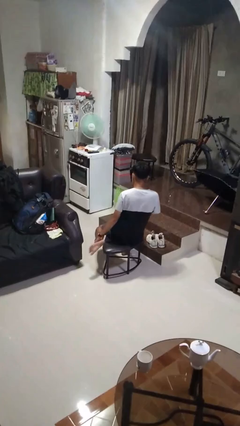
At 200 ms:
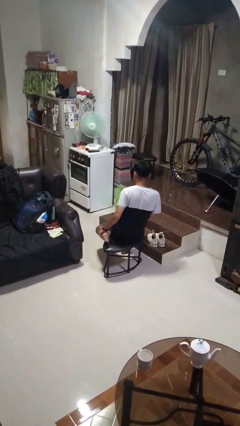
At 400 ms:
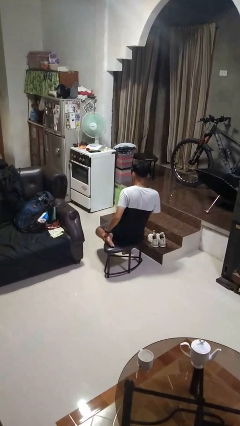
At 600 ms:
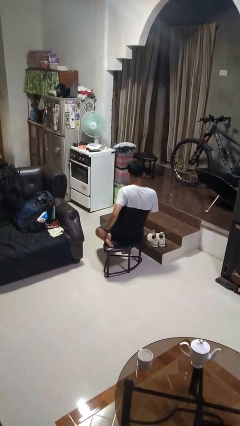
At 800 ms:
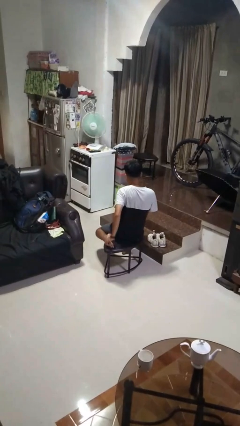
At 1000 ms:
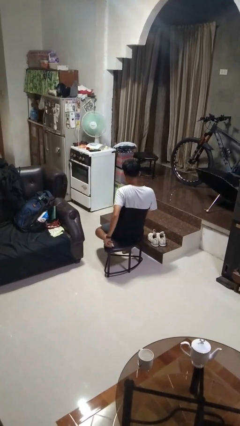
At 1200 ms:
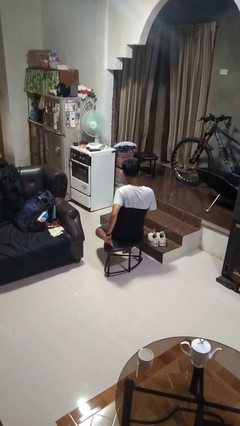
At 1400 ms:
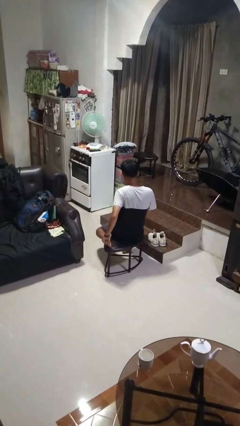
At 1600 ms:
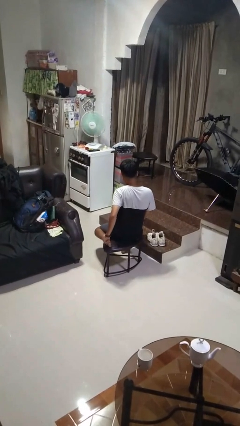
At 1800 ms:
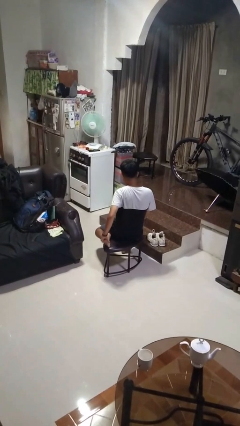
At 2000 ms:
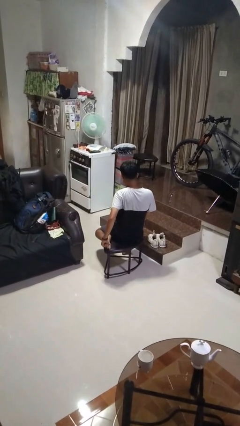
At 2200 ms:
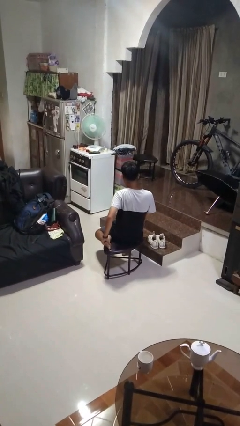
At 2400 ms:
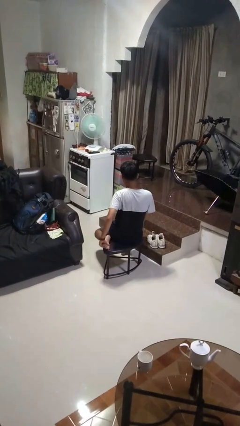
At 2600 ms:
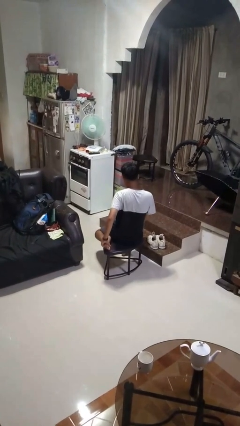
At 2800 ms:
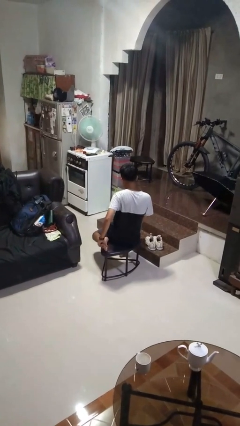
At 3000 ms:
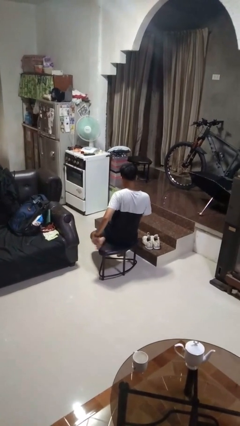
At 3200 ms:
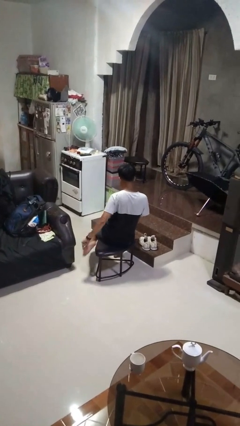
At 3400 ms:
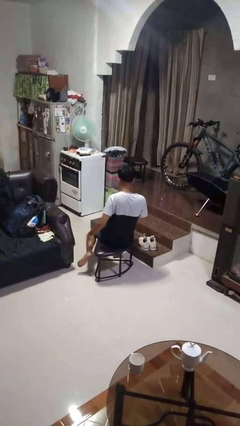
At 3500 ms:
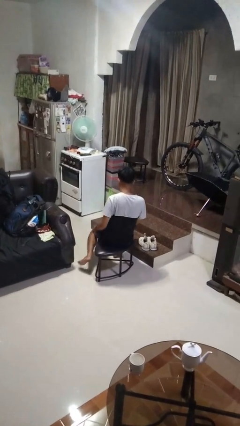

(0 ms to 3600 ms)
person rubs foot

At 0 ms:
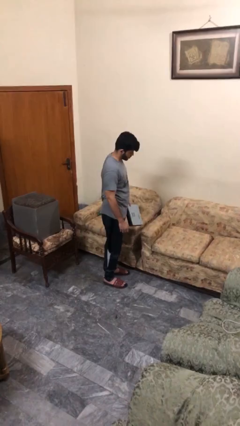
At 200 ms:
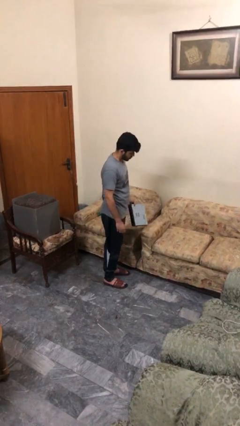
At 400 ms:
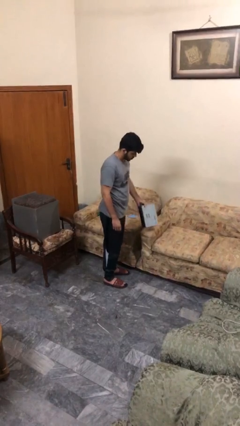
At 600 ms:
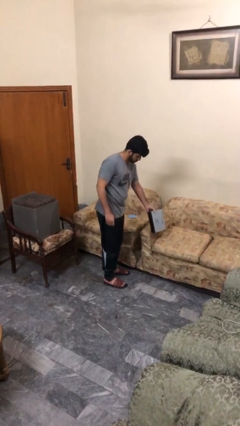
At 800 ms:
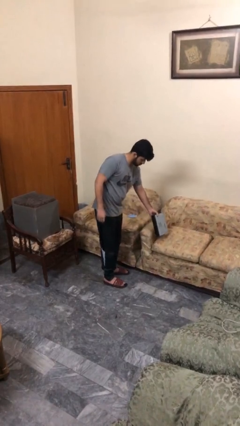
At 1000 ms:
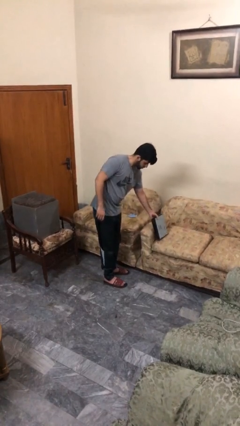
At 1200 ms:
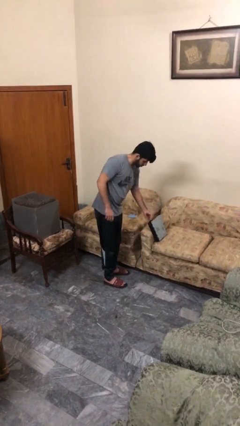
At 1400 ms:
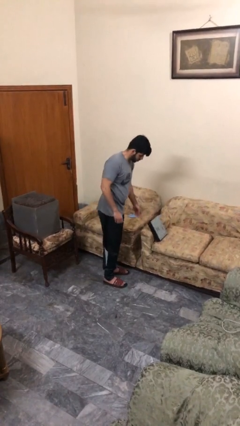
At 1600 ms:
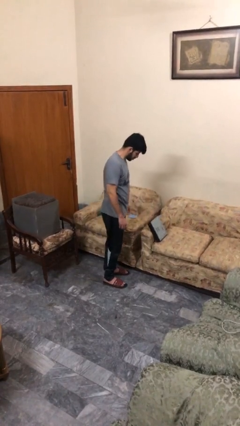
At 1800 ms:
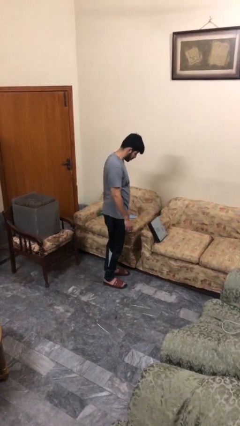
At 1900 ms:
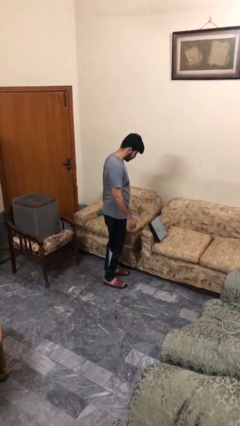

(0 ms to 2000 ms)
person puts down object on couch

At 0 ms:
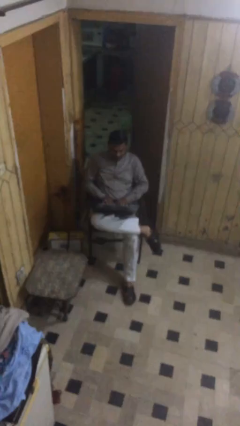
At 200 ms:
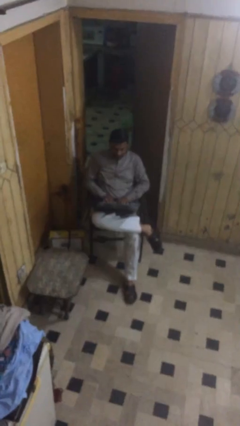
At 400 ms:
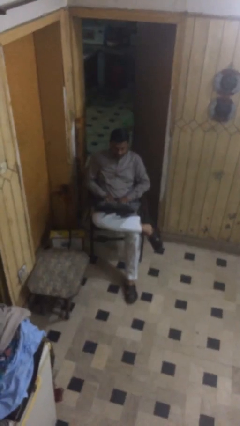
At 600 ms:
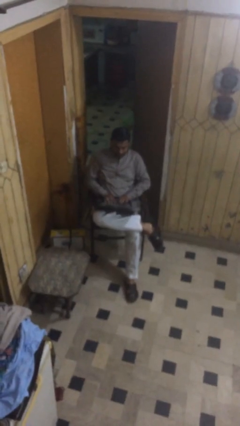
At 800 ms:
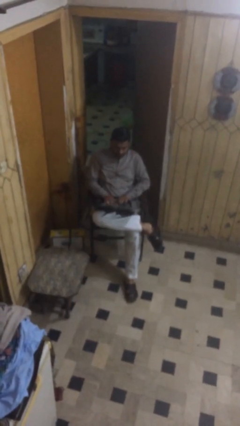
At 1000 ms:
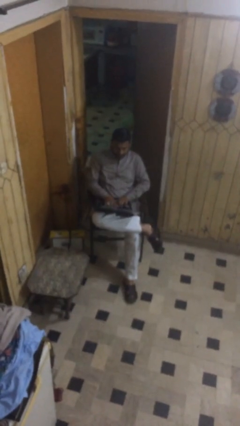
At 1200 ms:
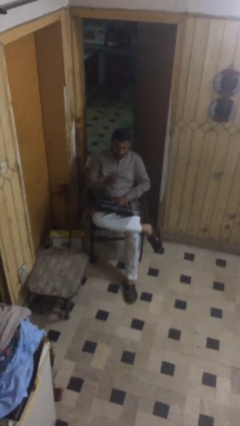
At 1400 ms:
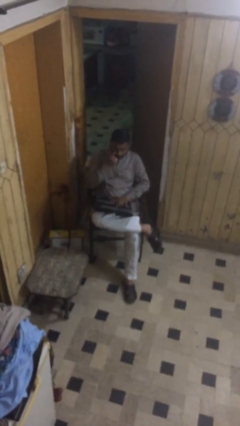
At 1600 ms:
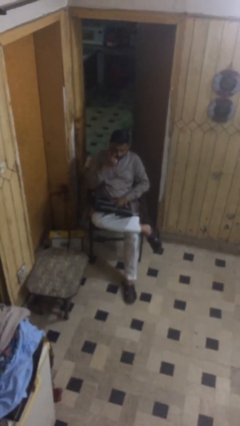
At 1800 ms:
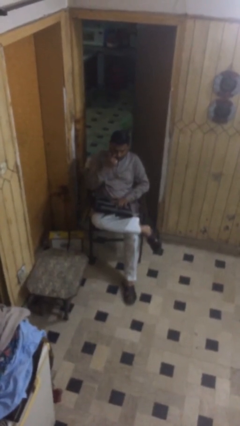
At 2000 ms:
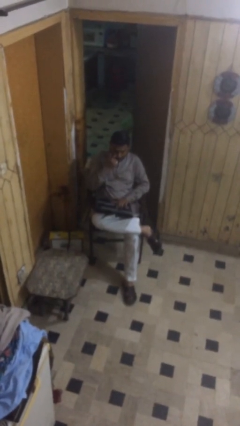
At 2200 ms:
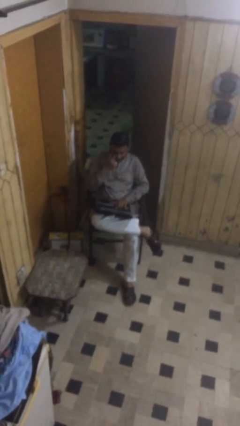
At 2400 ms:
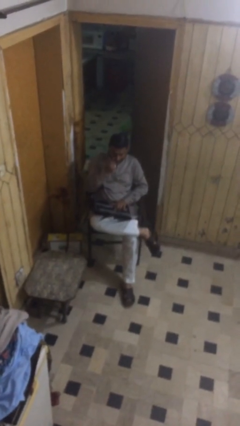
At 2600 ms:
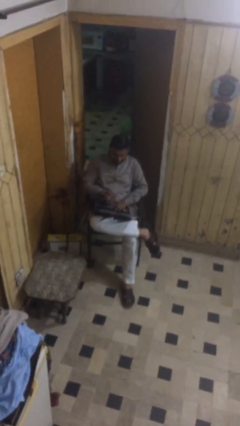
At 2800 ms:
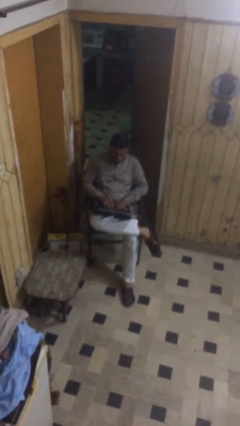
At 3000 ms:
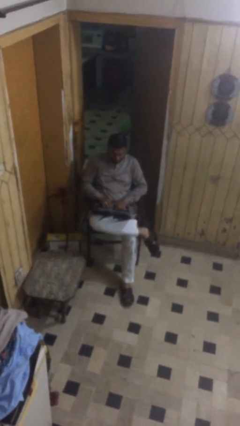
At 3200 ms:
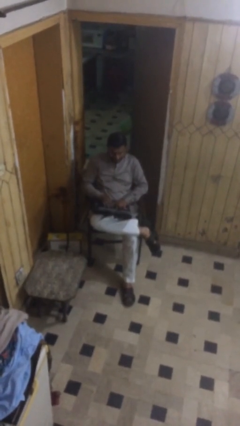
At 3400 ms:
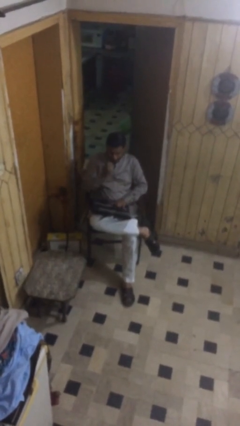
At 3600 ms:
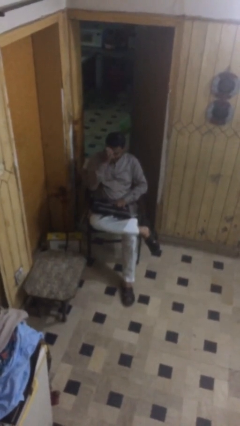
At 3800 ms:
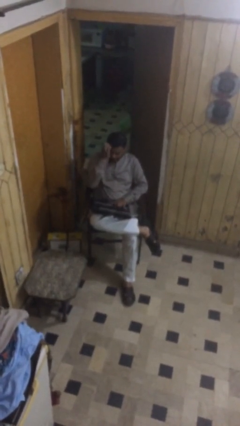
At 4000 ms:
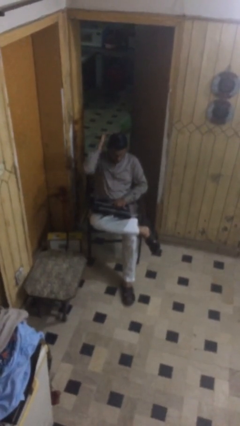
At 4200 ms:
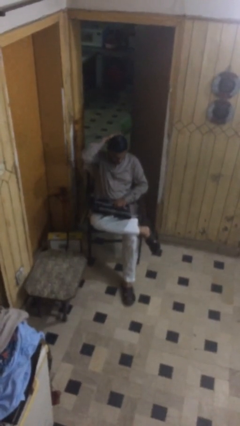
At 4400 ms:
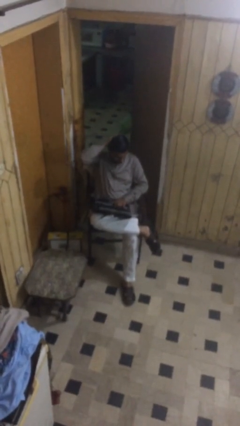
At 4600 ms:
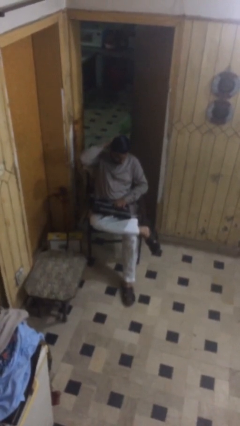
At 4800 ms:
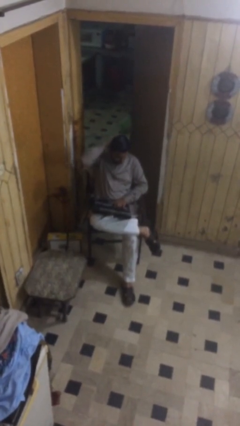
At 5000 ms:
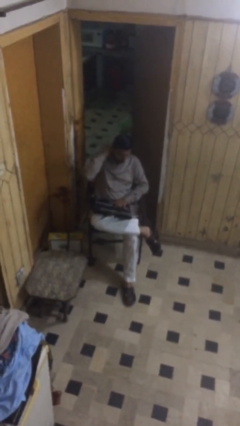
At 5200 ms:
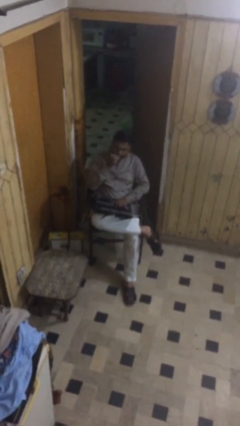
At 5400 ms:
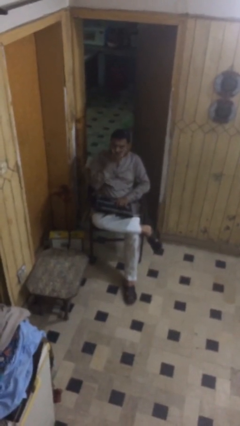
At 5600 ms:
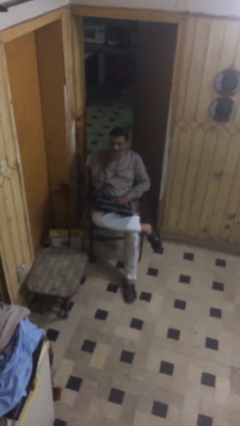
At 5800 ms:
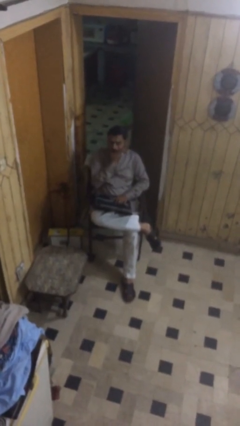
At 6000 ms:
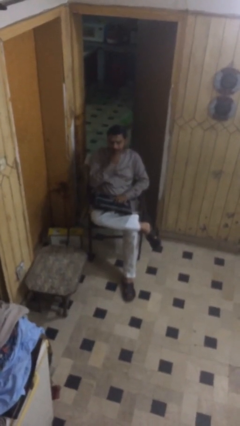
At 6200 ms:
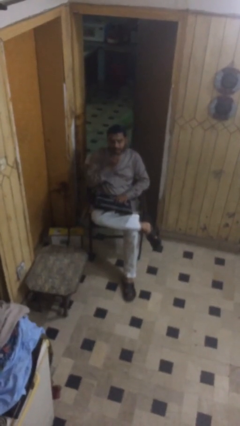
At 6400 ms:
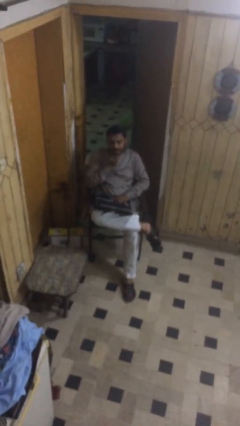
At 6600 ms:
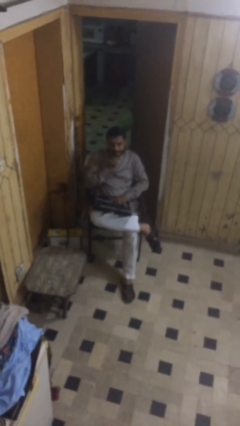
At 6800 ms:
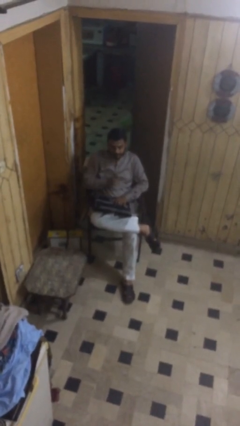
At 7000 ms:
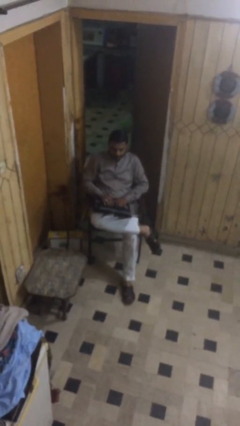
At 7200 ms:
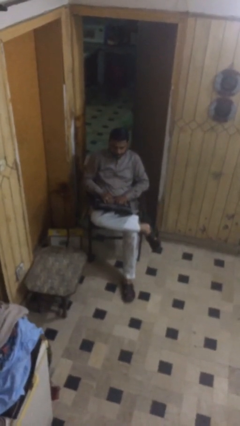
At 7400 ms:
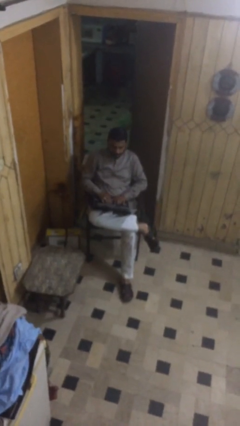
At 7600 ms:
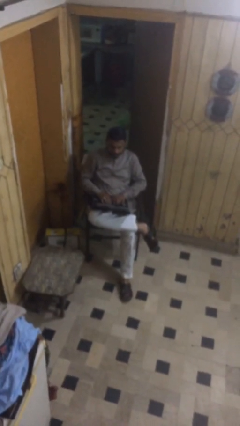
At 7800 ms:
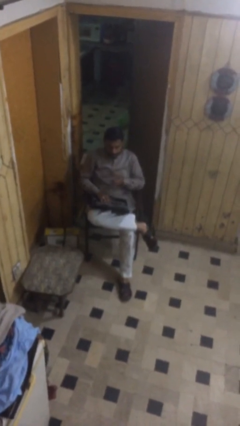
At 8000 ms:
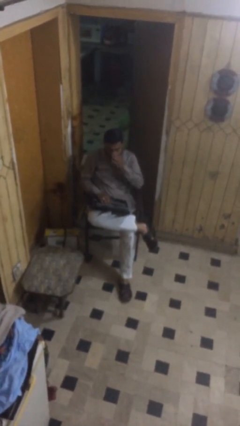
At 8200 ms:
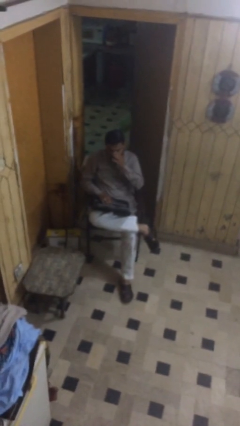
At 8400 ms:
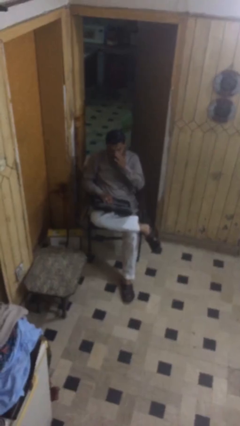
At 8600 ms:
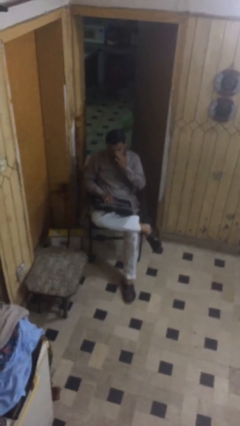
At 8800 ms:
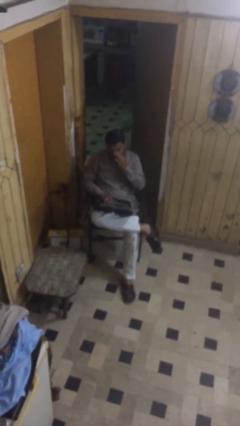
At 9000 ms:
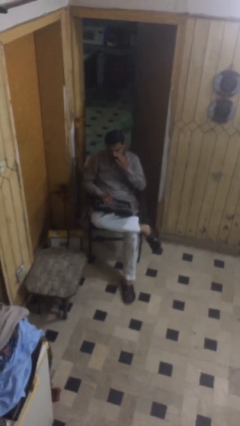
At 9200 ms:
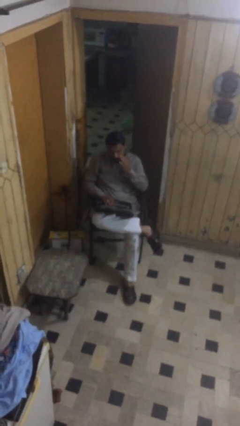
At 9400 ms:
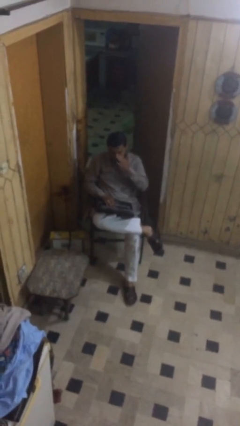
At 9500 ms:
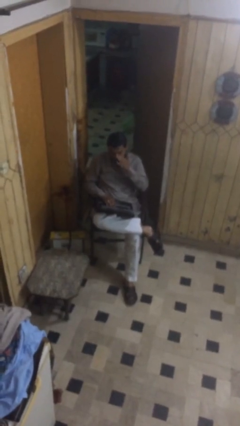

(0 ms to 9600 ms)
person interacts with laptop

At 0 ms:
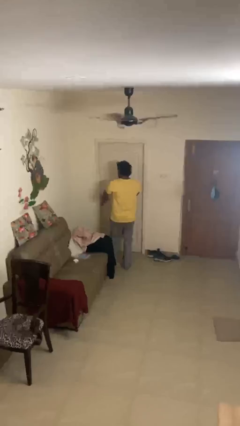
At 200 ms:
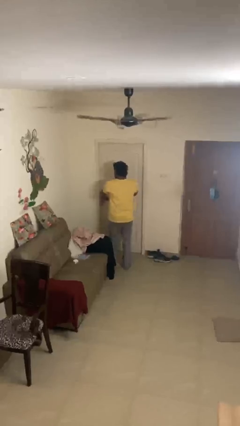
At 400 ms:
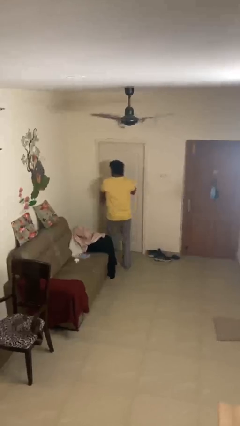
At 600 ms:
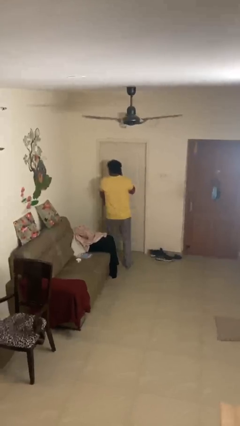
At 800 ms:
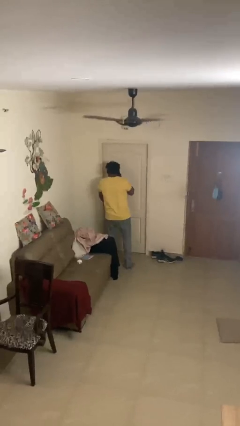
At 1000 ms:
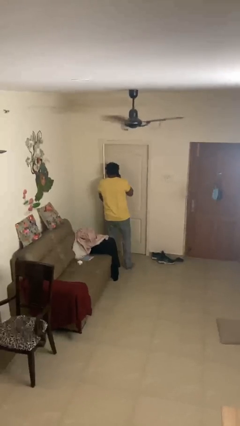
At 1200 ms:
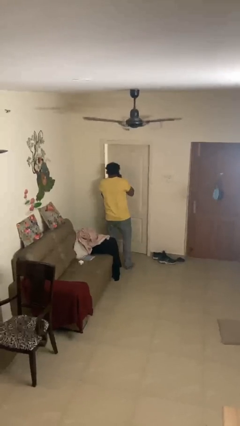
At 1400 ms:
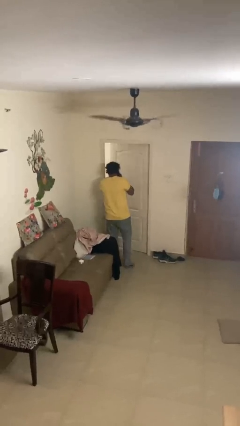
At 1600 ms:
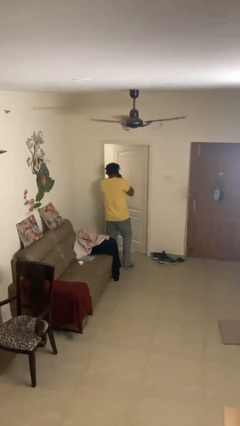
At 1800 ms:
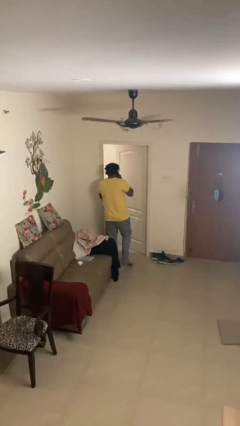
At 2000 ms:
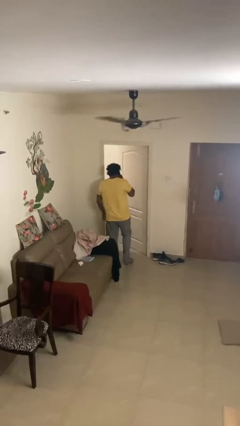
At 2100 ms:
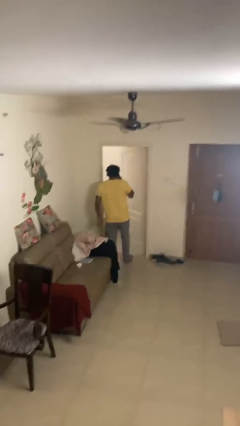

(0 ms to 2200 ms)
person opens facility door

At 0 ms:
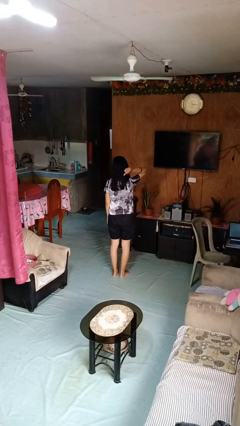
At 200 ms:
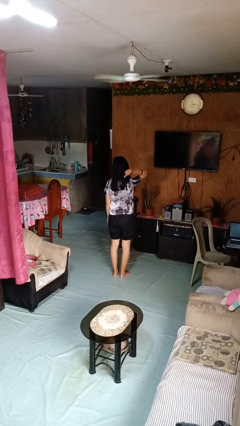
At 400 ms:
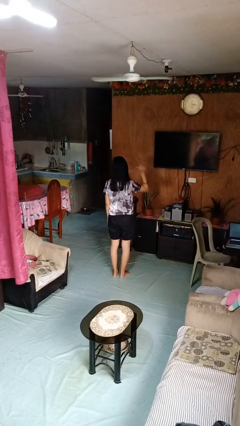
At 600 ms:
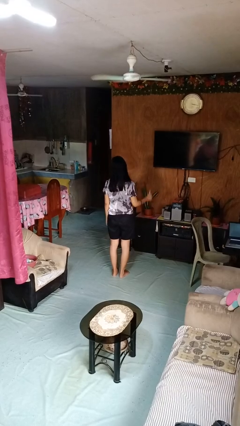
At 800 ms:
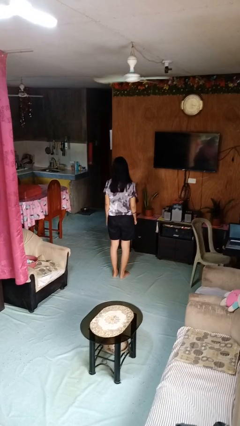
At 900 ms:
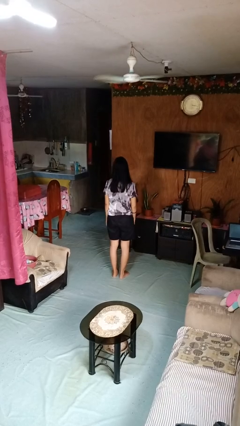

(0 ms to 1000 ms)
person gestures behind me
